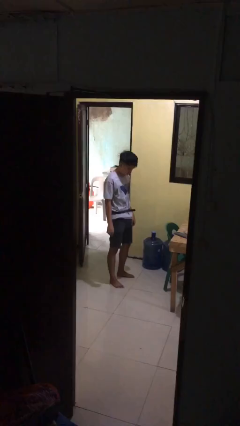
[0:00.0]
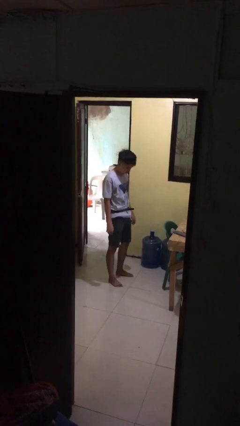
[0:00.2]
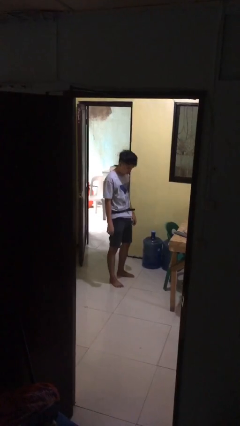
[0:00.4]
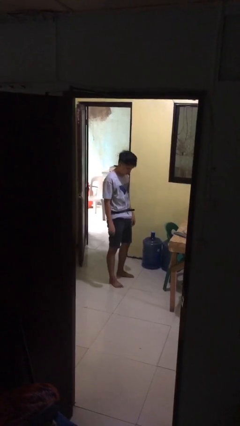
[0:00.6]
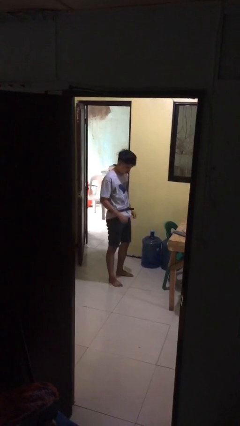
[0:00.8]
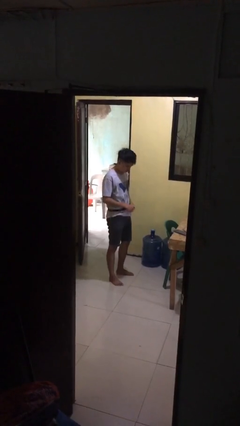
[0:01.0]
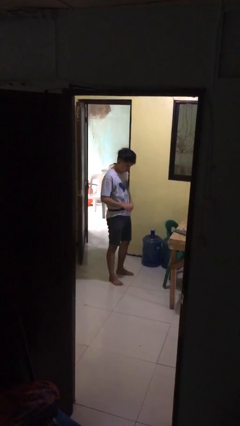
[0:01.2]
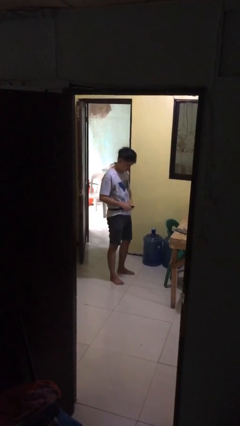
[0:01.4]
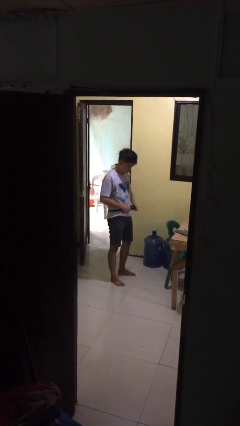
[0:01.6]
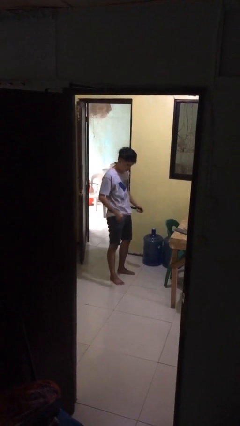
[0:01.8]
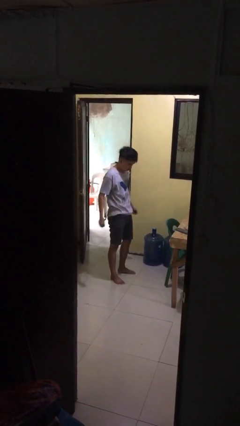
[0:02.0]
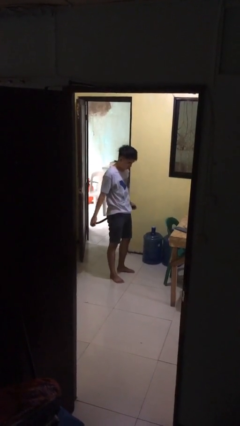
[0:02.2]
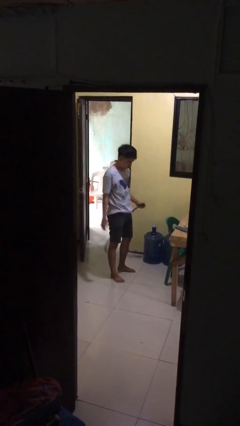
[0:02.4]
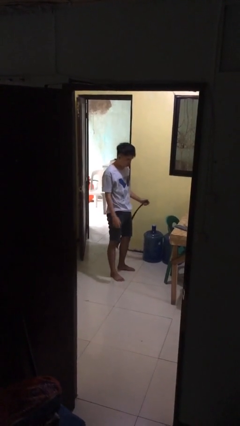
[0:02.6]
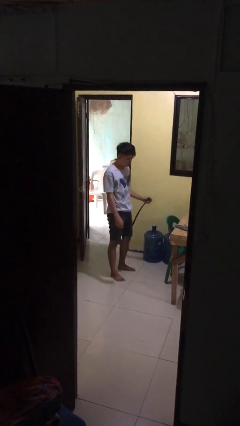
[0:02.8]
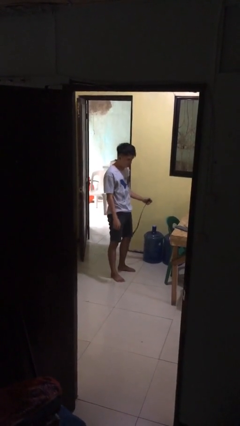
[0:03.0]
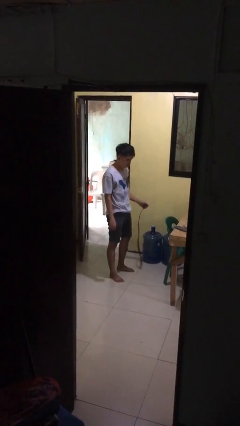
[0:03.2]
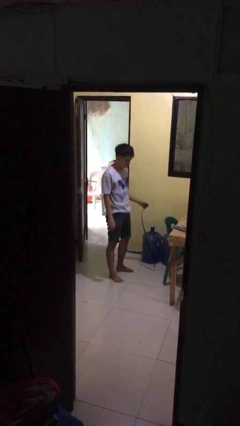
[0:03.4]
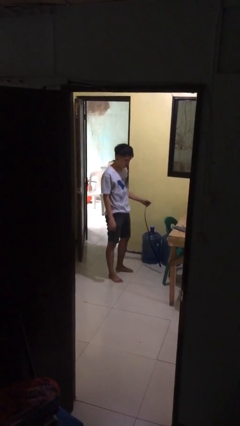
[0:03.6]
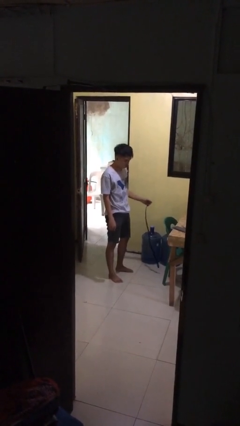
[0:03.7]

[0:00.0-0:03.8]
person takes off belt

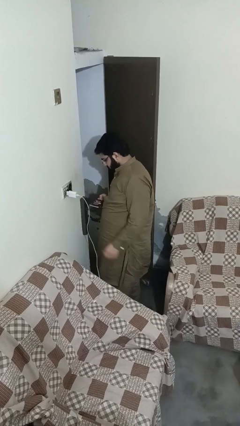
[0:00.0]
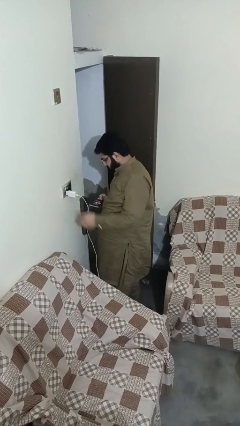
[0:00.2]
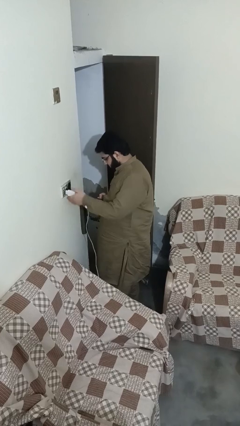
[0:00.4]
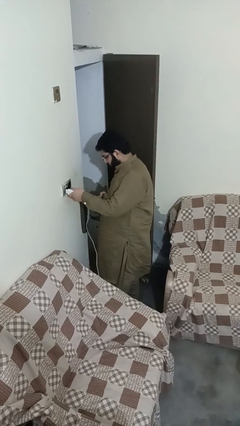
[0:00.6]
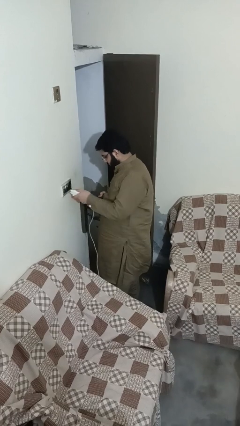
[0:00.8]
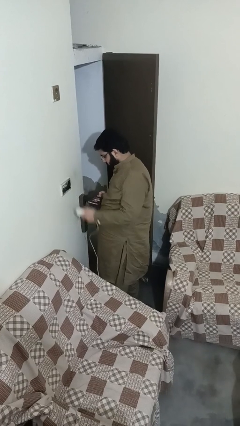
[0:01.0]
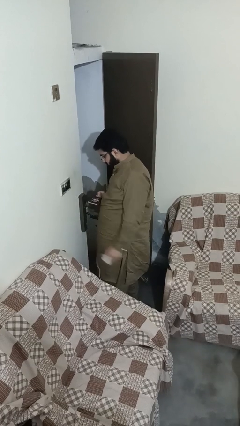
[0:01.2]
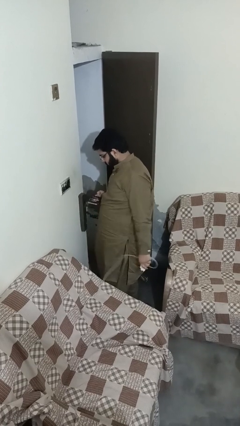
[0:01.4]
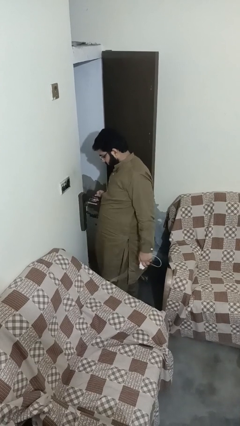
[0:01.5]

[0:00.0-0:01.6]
person unplugs from electrical socket

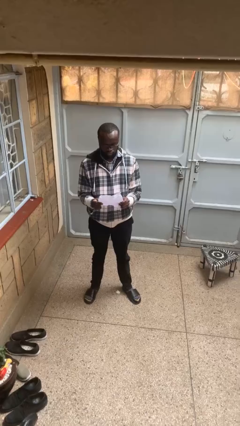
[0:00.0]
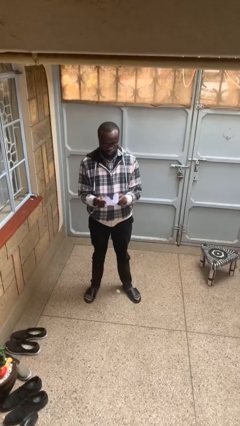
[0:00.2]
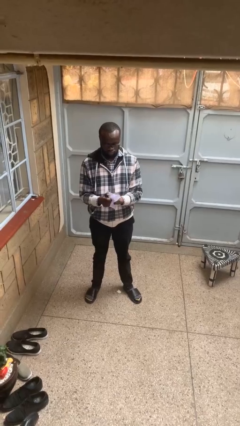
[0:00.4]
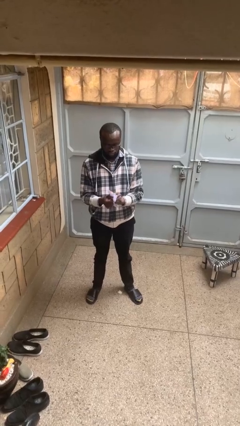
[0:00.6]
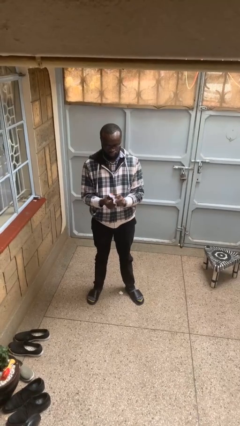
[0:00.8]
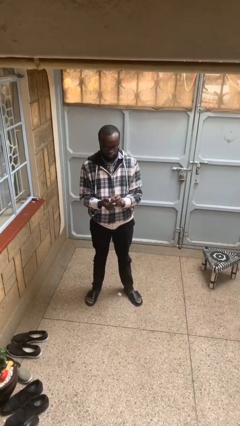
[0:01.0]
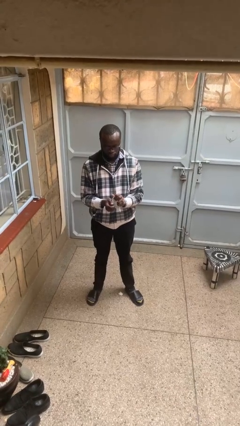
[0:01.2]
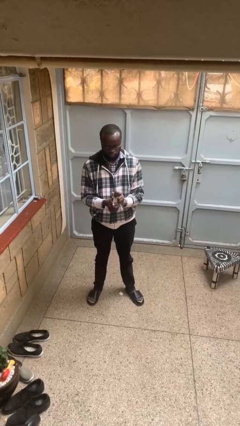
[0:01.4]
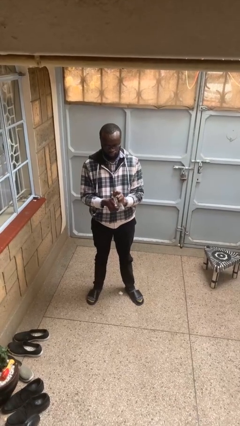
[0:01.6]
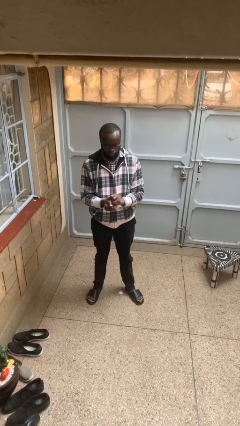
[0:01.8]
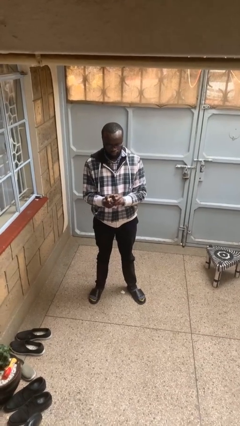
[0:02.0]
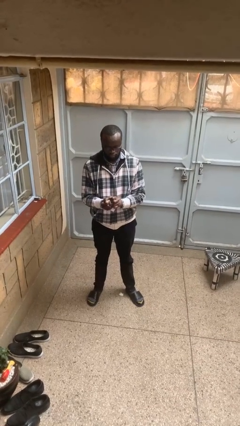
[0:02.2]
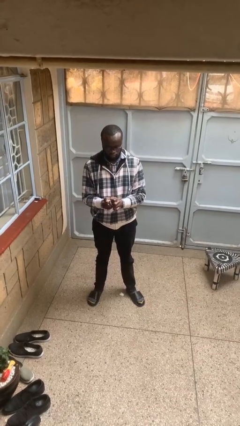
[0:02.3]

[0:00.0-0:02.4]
person crumples paper

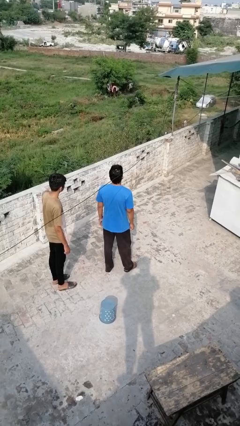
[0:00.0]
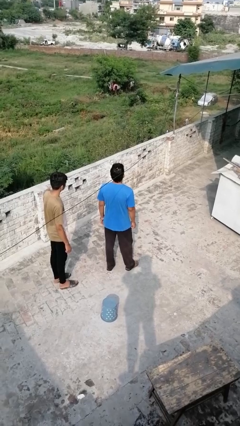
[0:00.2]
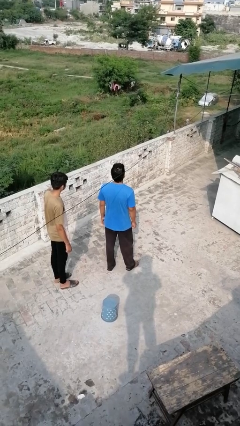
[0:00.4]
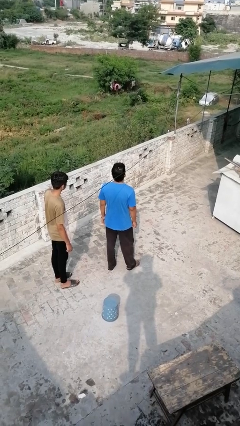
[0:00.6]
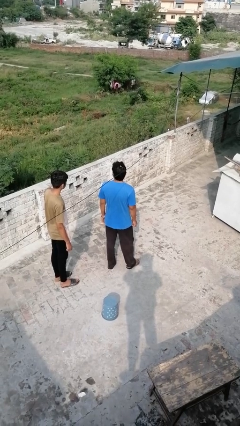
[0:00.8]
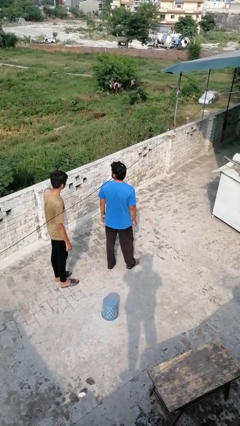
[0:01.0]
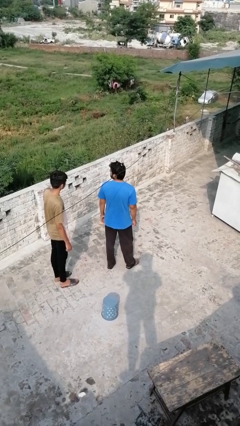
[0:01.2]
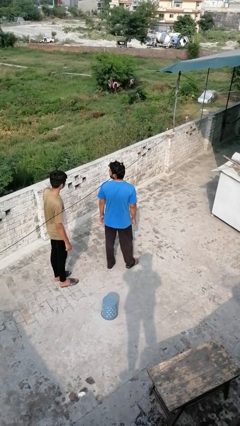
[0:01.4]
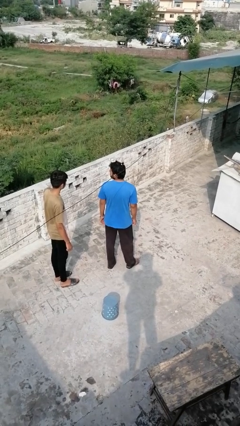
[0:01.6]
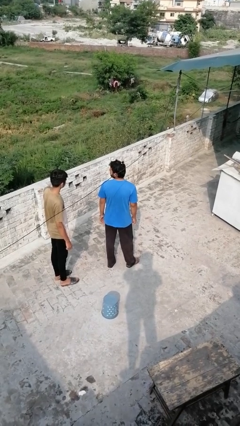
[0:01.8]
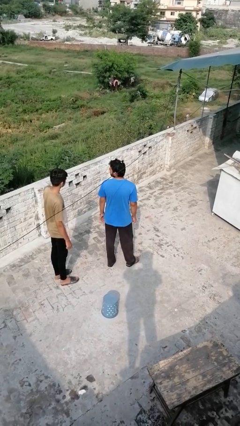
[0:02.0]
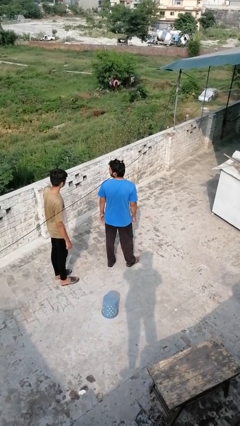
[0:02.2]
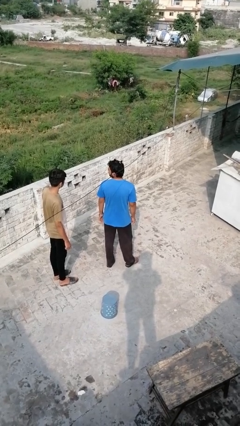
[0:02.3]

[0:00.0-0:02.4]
person looks over shoulder

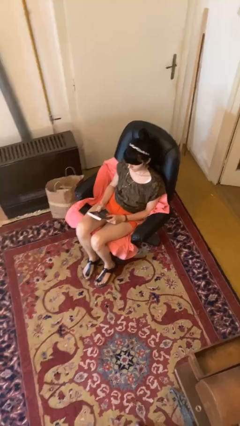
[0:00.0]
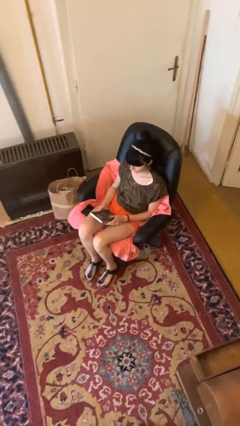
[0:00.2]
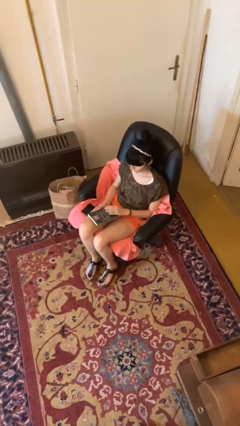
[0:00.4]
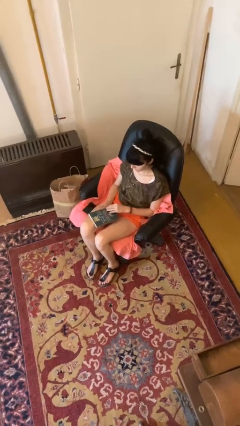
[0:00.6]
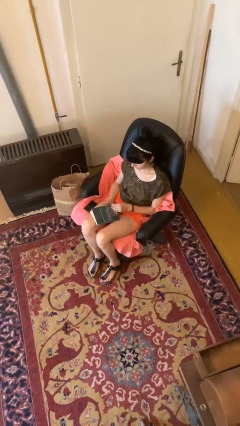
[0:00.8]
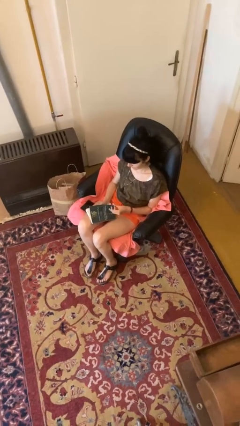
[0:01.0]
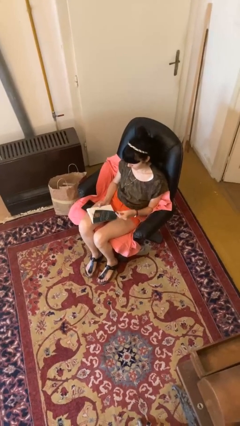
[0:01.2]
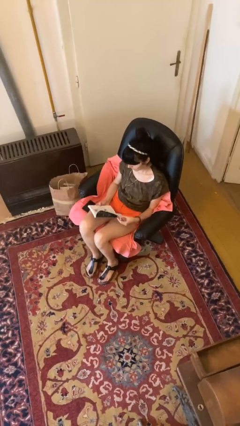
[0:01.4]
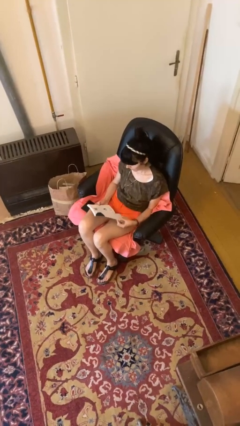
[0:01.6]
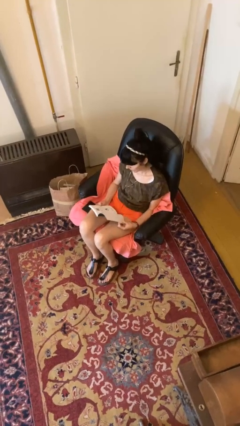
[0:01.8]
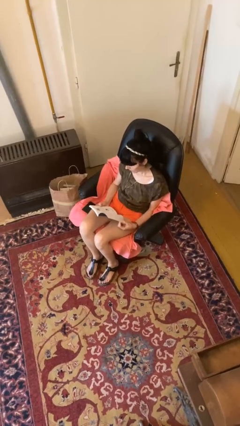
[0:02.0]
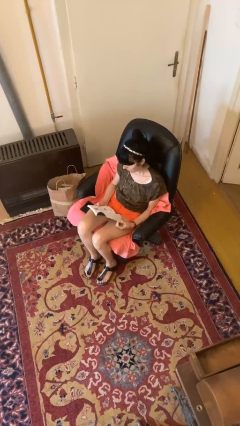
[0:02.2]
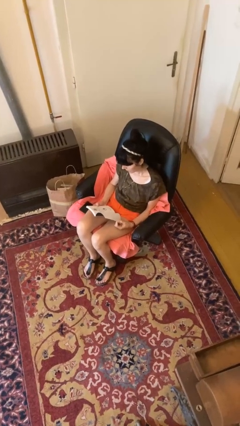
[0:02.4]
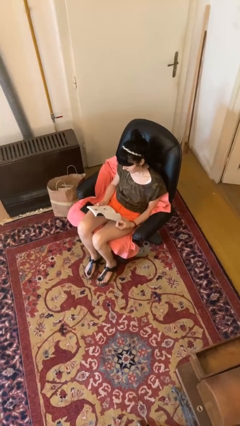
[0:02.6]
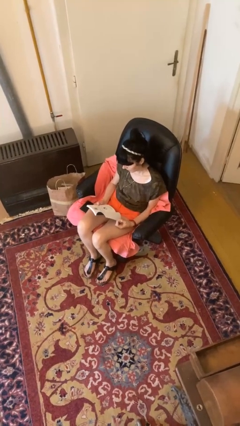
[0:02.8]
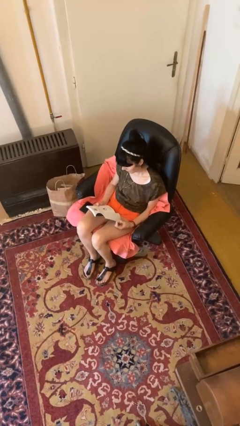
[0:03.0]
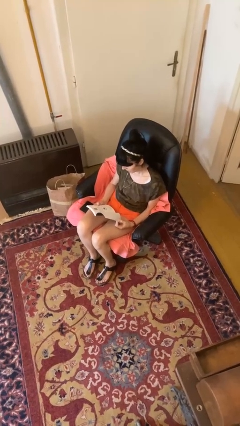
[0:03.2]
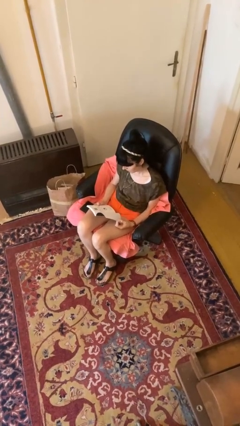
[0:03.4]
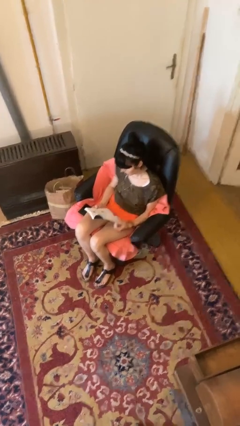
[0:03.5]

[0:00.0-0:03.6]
person reads book

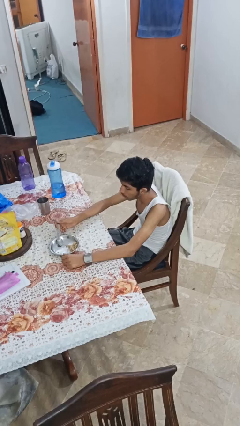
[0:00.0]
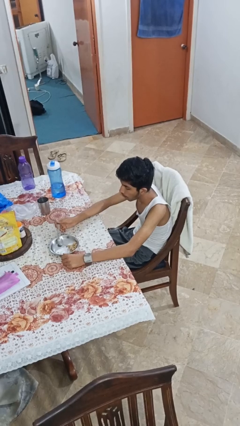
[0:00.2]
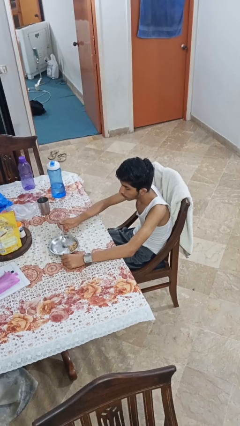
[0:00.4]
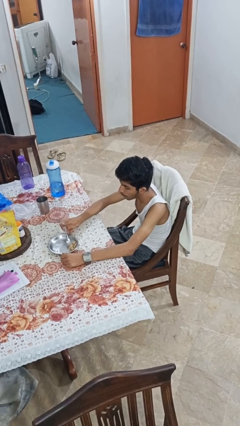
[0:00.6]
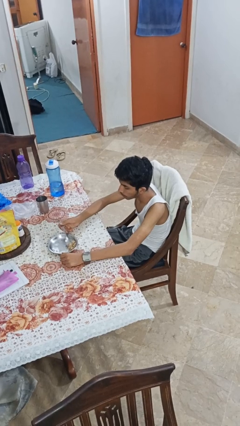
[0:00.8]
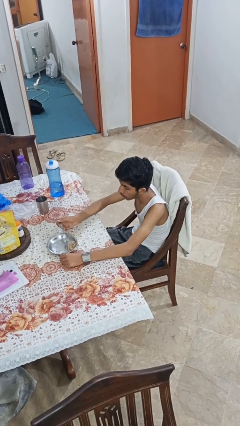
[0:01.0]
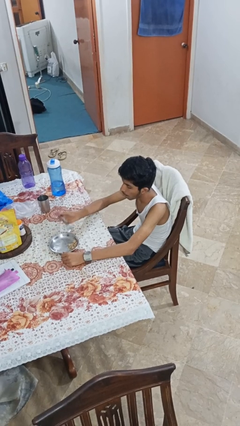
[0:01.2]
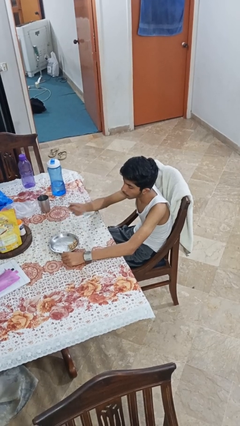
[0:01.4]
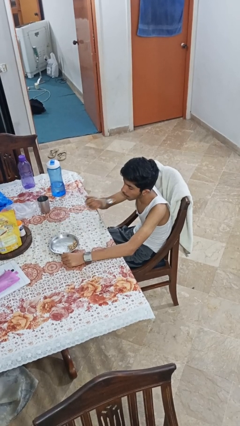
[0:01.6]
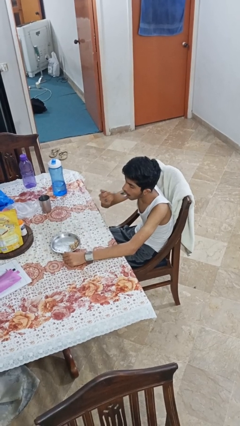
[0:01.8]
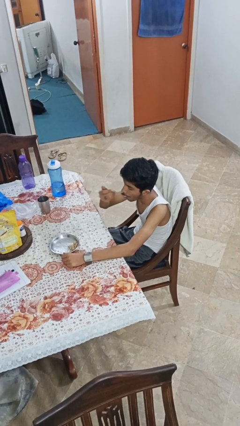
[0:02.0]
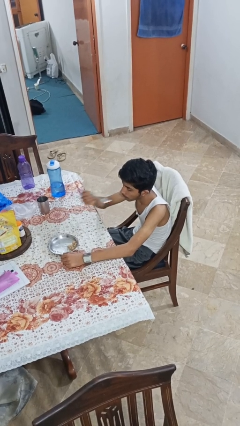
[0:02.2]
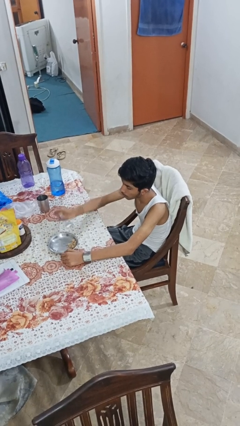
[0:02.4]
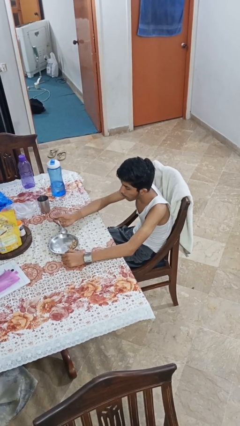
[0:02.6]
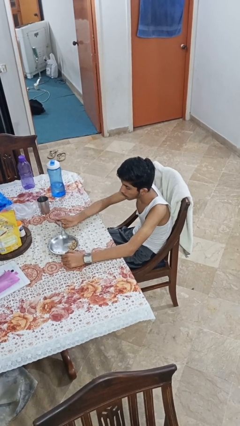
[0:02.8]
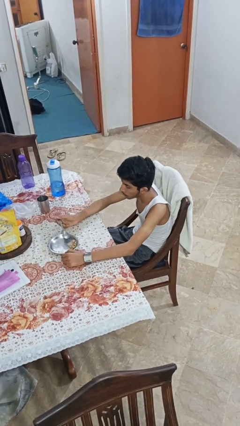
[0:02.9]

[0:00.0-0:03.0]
person eats with utensil

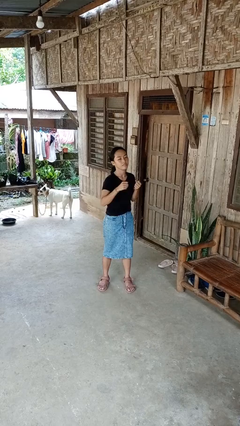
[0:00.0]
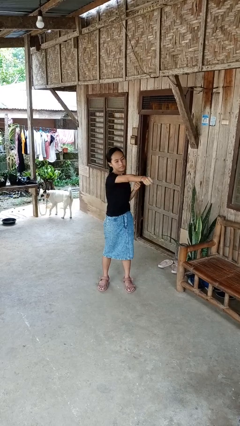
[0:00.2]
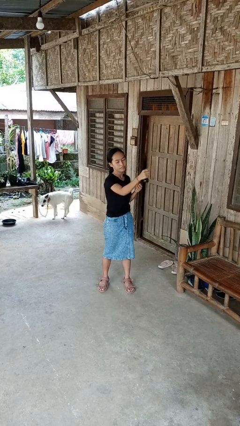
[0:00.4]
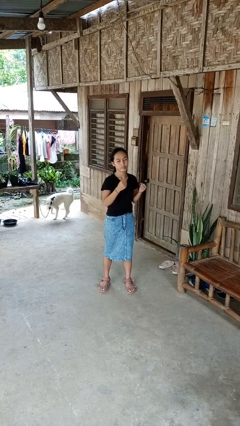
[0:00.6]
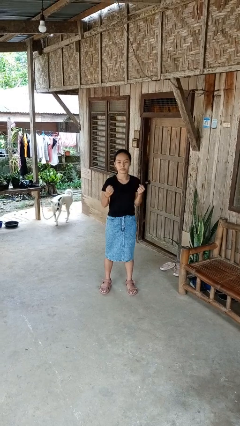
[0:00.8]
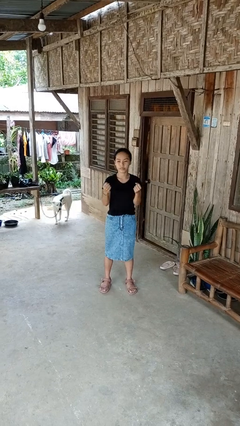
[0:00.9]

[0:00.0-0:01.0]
person punches
